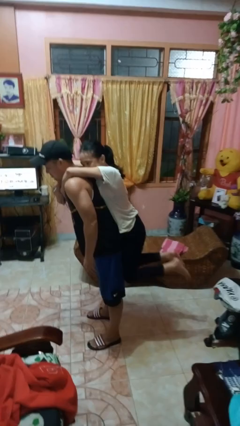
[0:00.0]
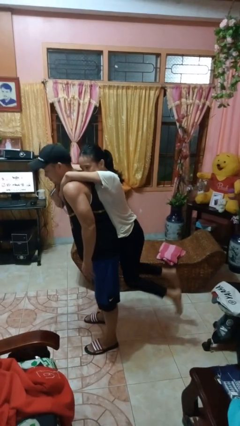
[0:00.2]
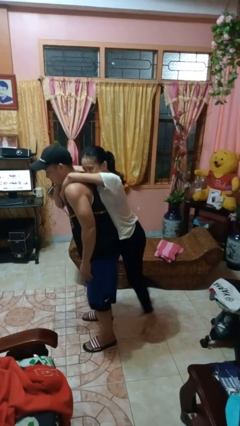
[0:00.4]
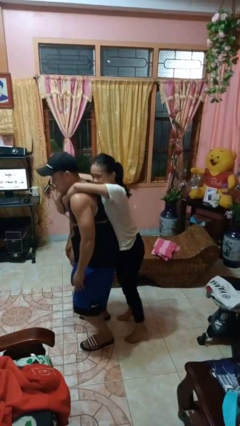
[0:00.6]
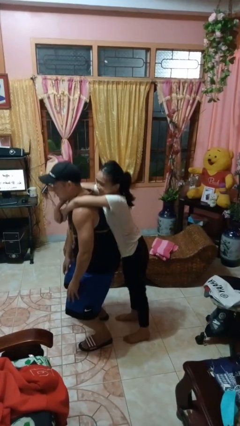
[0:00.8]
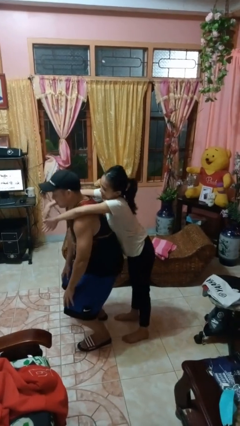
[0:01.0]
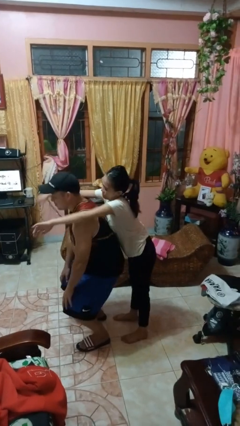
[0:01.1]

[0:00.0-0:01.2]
person puts down person

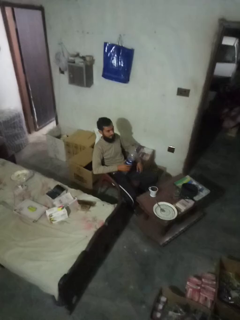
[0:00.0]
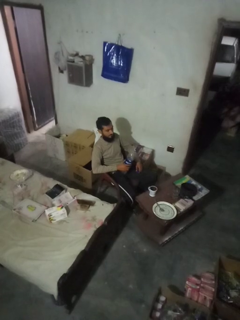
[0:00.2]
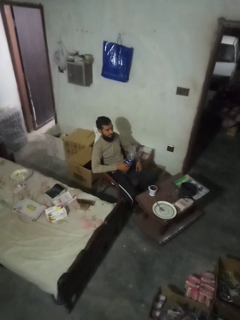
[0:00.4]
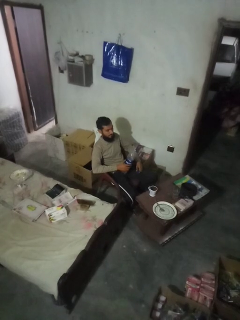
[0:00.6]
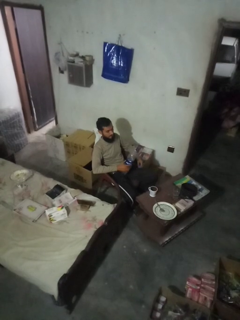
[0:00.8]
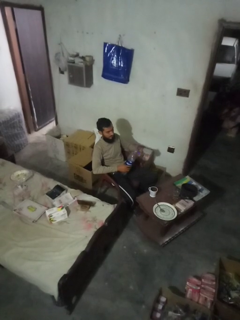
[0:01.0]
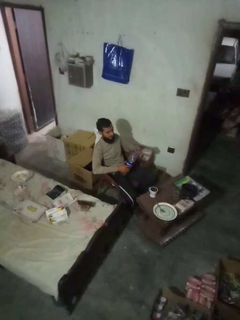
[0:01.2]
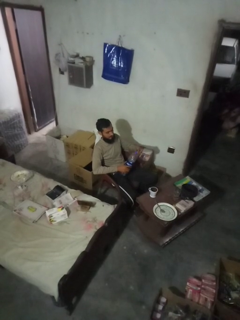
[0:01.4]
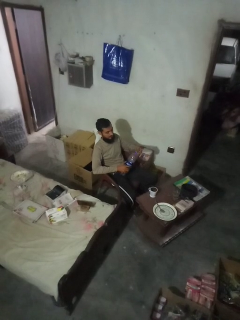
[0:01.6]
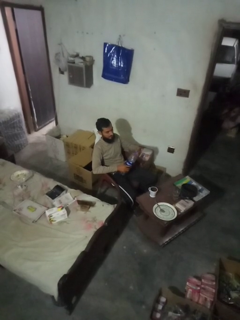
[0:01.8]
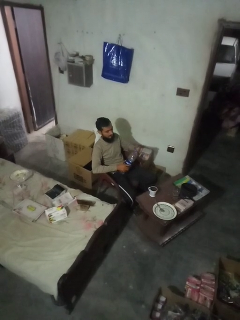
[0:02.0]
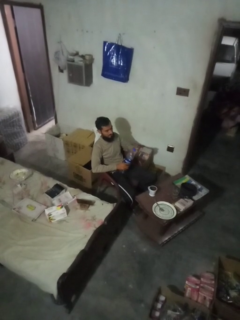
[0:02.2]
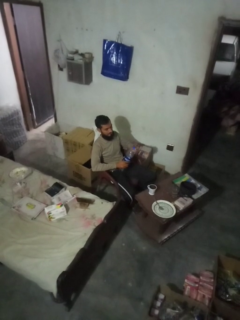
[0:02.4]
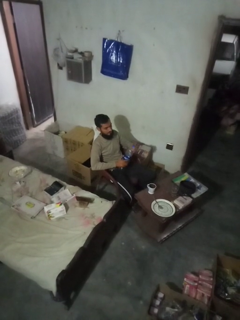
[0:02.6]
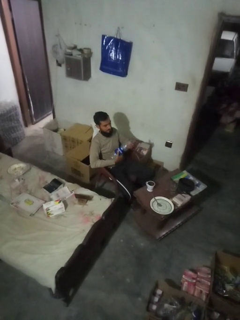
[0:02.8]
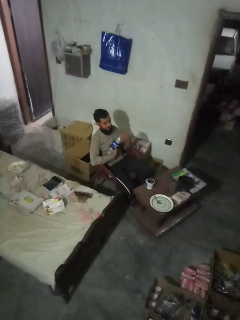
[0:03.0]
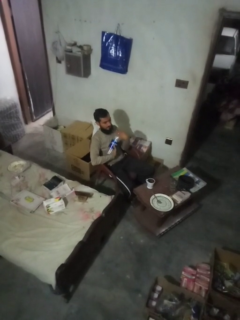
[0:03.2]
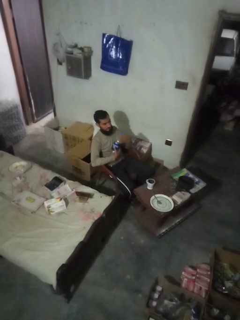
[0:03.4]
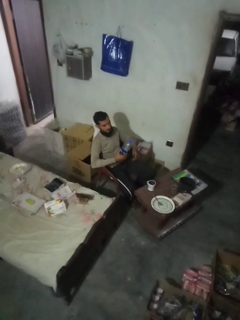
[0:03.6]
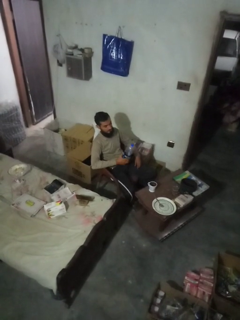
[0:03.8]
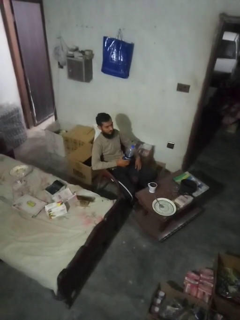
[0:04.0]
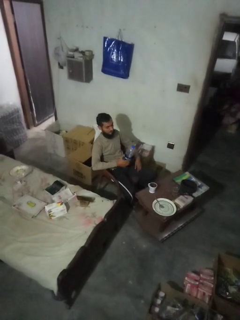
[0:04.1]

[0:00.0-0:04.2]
person screws lid to bottle

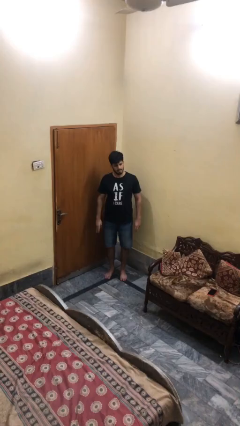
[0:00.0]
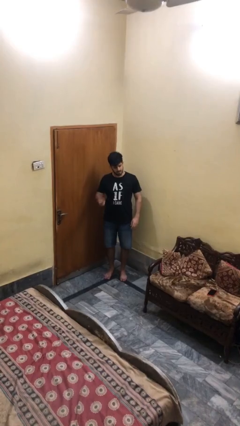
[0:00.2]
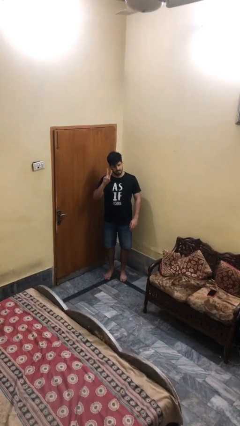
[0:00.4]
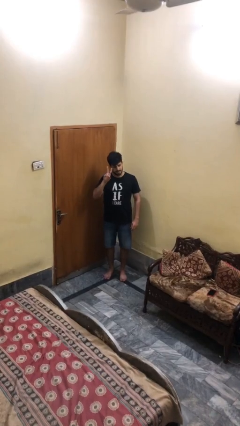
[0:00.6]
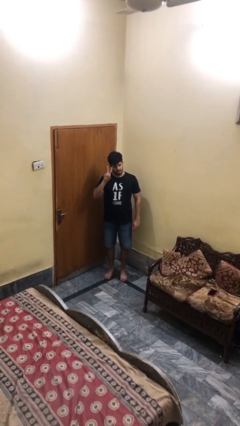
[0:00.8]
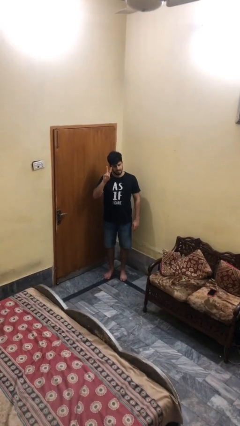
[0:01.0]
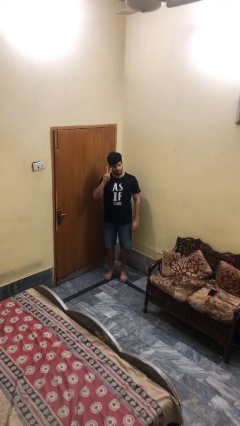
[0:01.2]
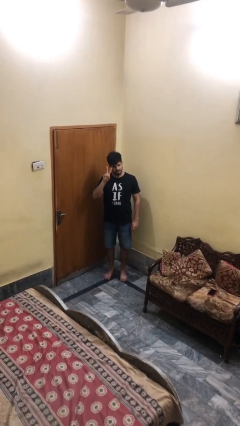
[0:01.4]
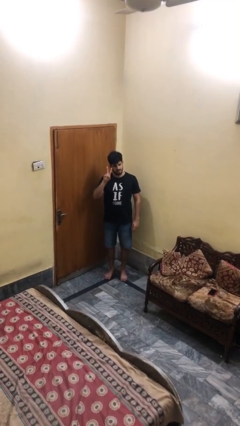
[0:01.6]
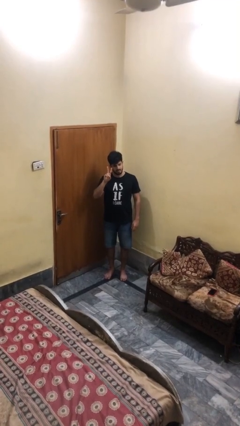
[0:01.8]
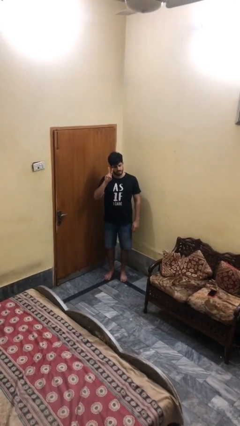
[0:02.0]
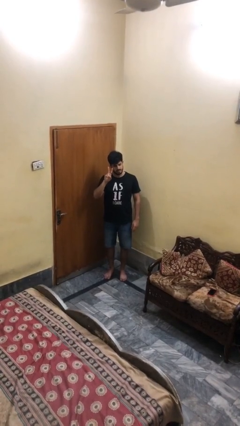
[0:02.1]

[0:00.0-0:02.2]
person gestures peace

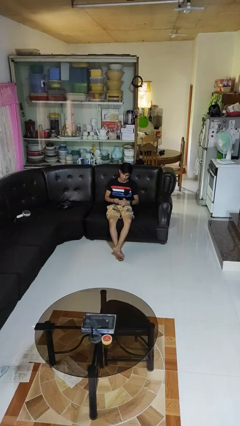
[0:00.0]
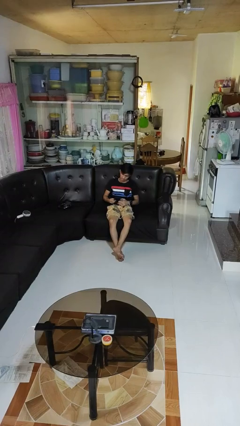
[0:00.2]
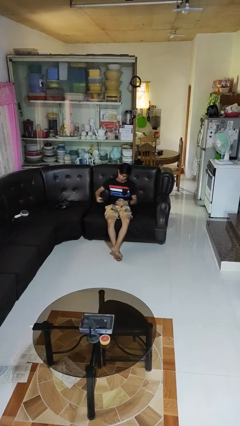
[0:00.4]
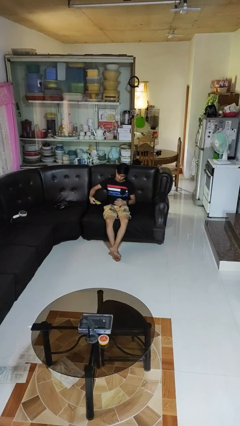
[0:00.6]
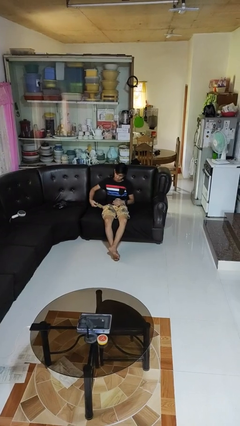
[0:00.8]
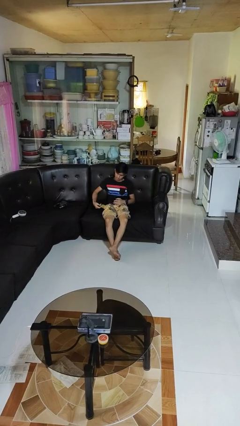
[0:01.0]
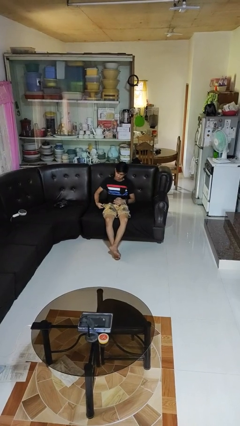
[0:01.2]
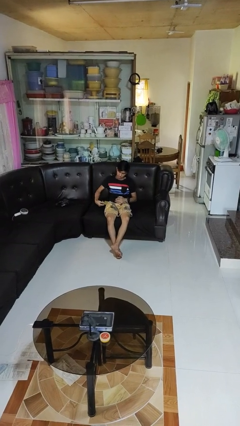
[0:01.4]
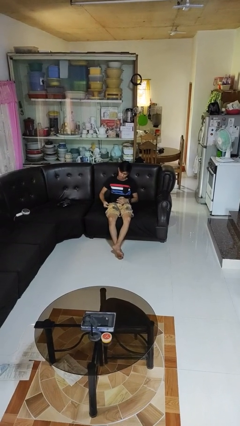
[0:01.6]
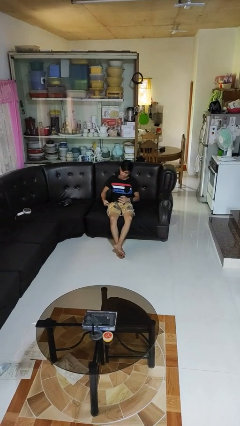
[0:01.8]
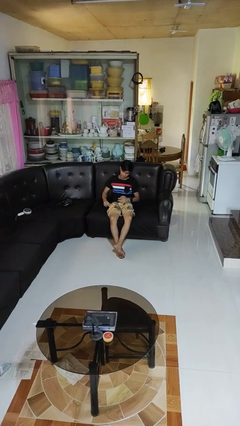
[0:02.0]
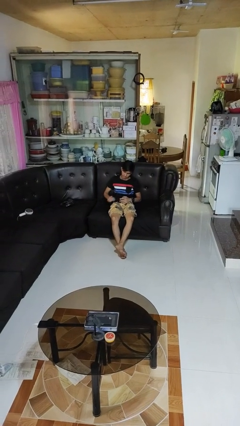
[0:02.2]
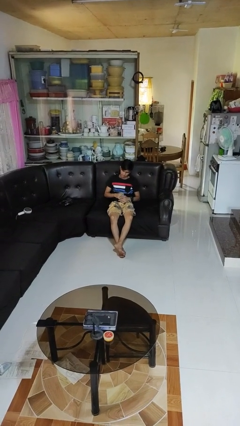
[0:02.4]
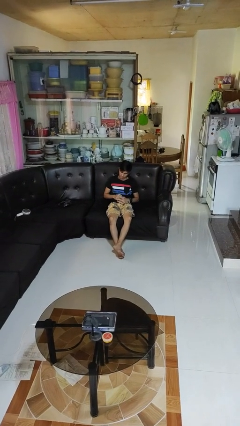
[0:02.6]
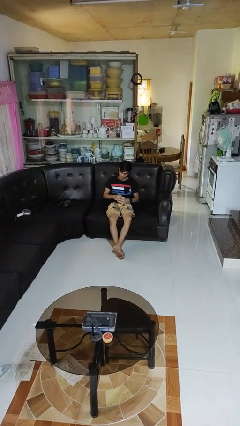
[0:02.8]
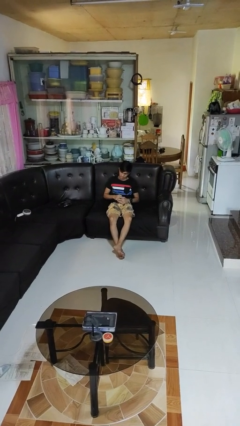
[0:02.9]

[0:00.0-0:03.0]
person puts phone into pocket

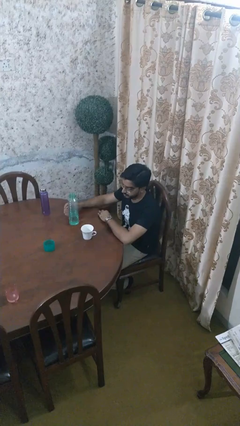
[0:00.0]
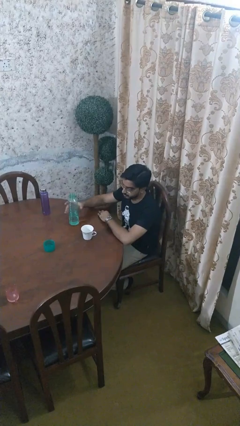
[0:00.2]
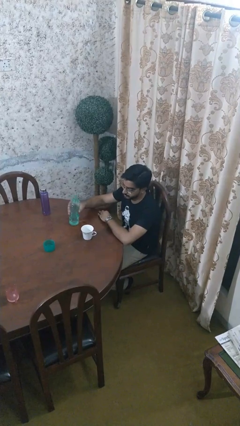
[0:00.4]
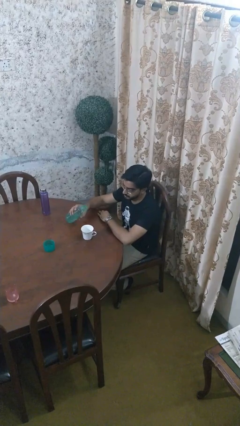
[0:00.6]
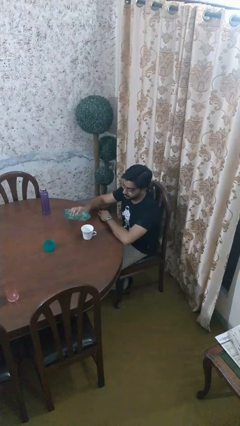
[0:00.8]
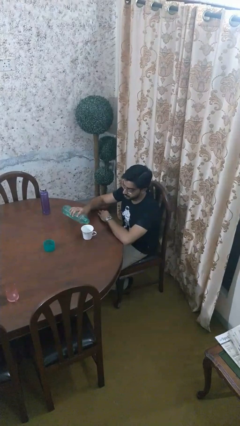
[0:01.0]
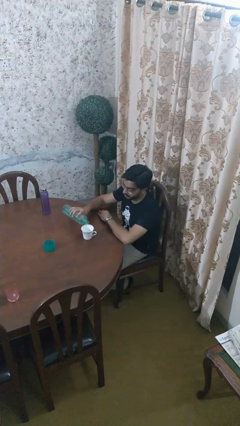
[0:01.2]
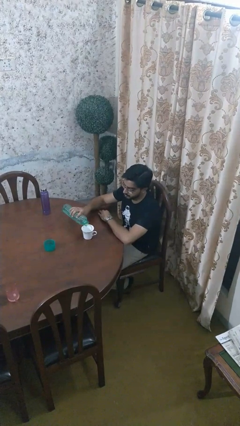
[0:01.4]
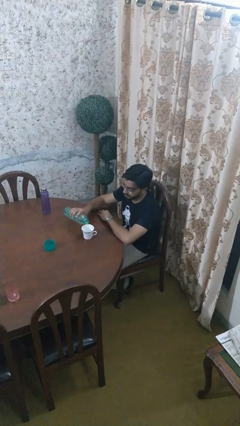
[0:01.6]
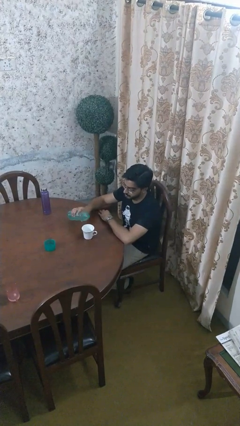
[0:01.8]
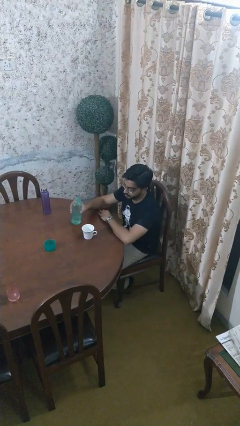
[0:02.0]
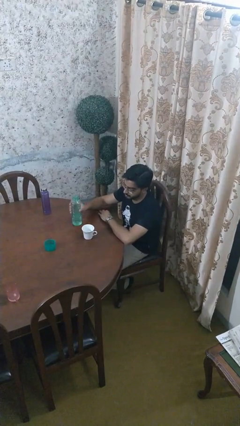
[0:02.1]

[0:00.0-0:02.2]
person pours liquid into cup

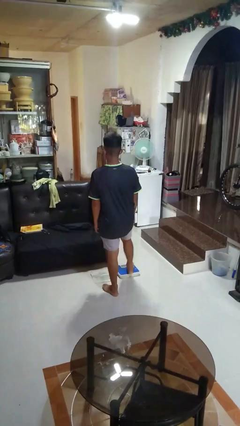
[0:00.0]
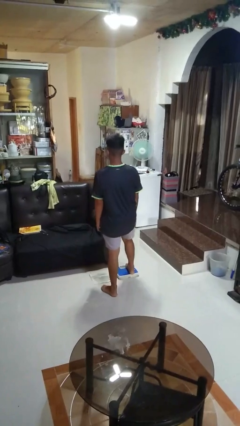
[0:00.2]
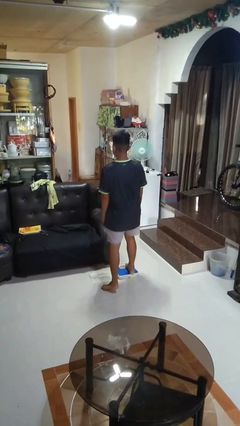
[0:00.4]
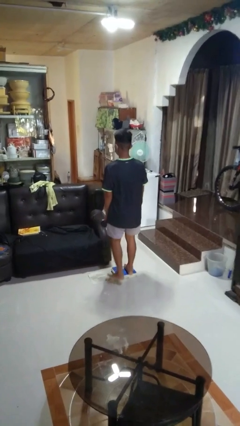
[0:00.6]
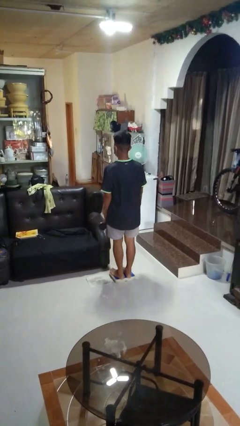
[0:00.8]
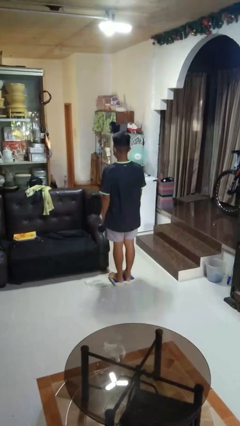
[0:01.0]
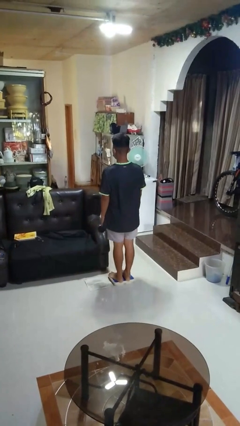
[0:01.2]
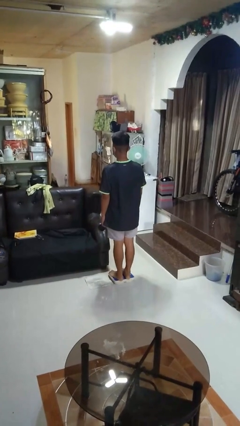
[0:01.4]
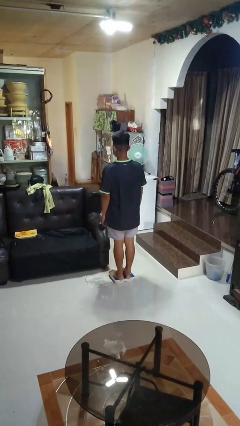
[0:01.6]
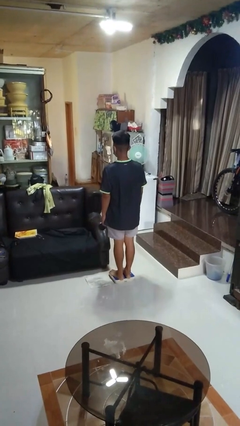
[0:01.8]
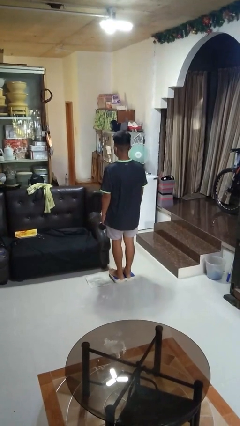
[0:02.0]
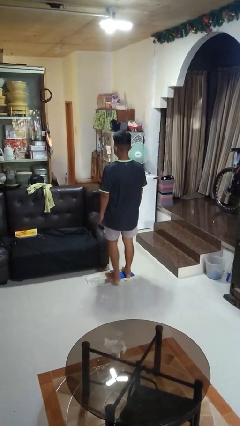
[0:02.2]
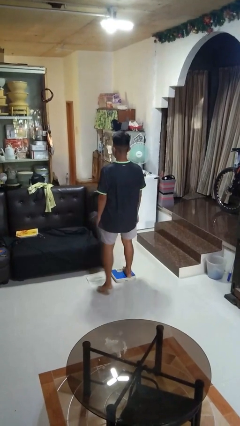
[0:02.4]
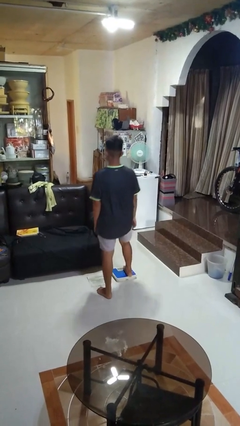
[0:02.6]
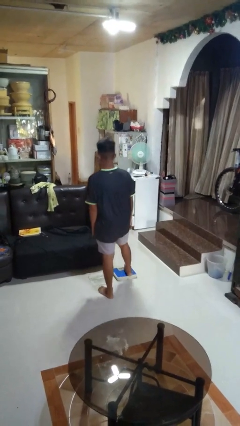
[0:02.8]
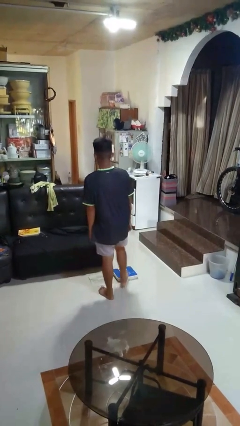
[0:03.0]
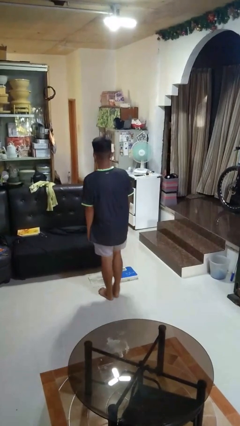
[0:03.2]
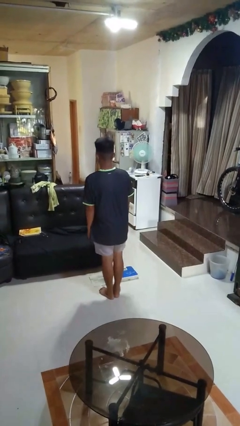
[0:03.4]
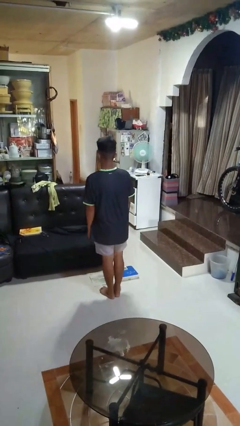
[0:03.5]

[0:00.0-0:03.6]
person uses bodyweight scale

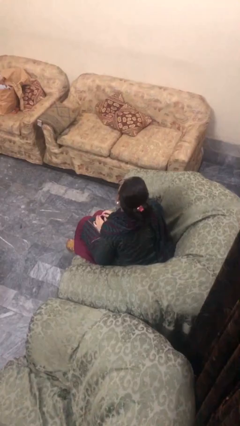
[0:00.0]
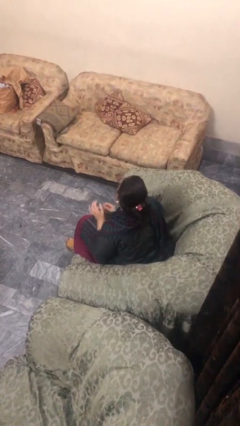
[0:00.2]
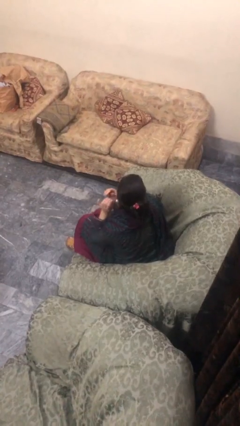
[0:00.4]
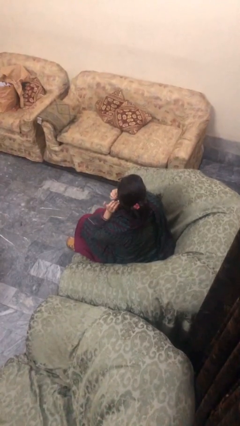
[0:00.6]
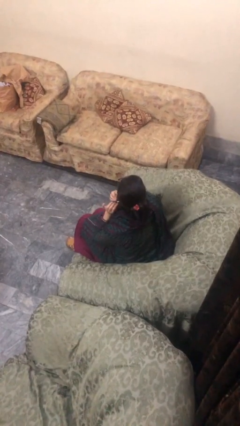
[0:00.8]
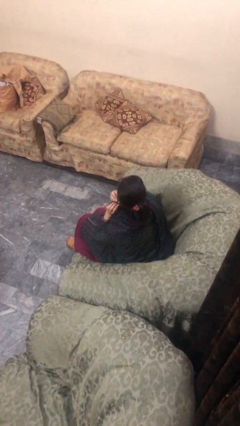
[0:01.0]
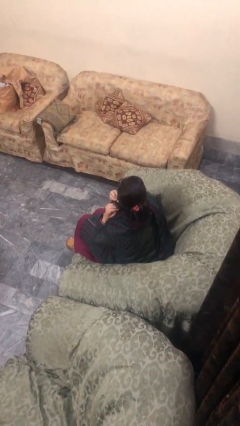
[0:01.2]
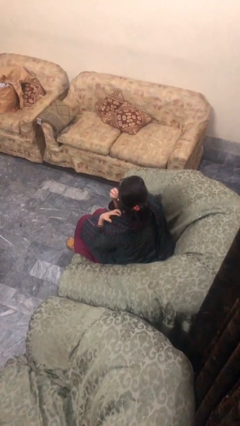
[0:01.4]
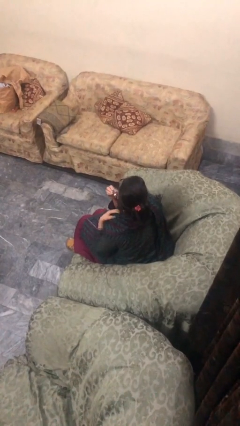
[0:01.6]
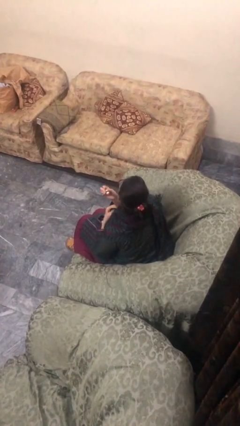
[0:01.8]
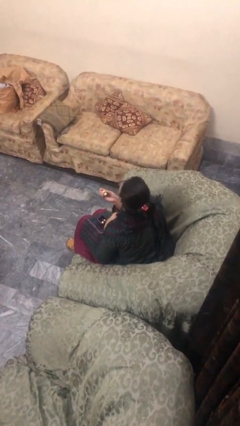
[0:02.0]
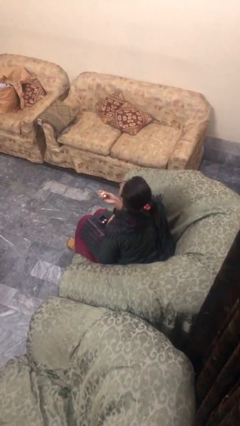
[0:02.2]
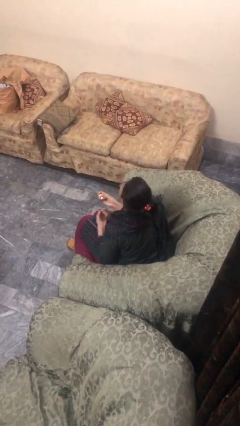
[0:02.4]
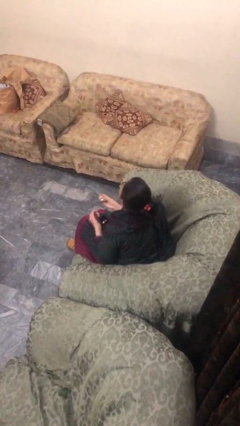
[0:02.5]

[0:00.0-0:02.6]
person takes off earrings
